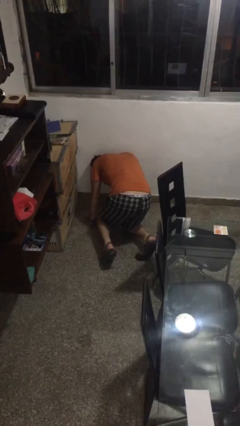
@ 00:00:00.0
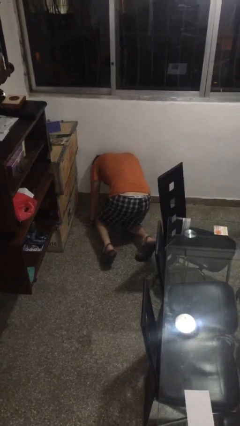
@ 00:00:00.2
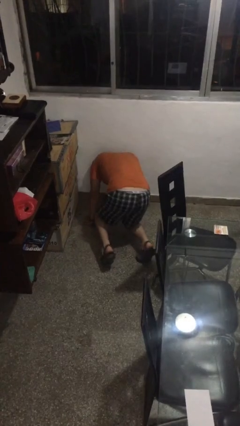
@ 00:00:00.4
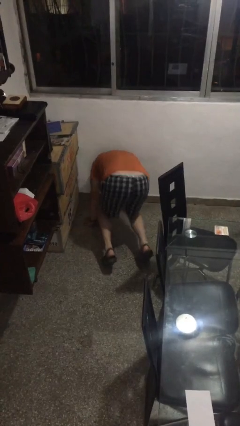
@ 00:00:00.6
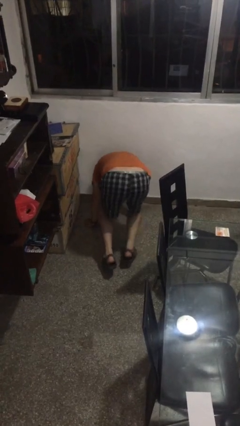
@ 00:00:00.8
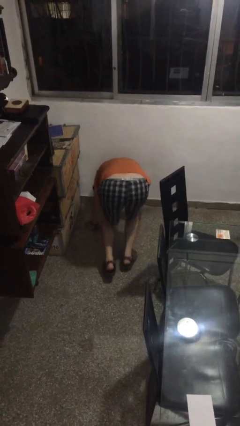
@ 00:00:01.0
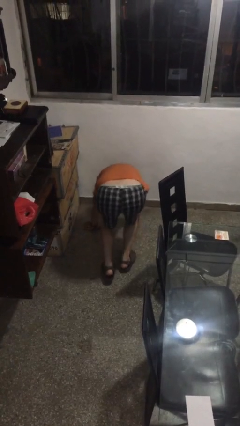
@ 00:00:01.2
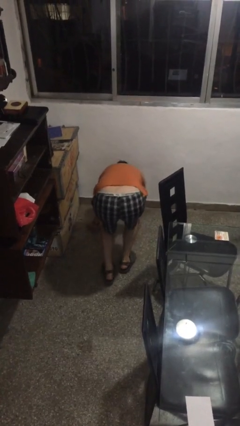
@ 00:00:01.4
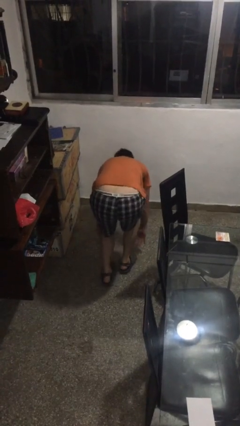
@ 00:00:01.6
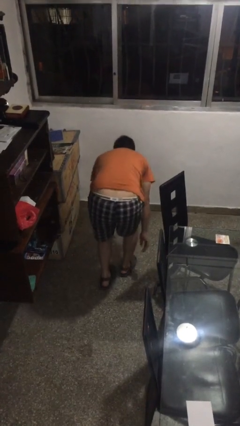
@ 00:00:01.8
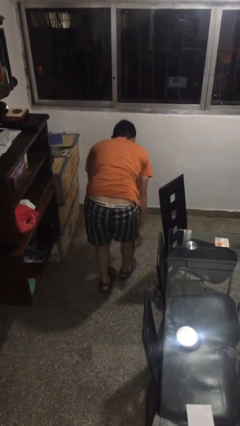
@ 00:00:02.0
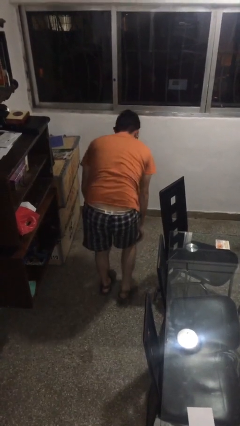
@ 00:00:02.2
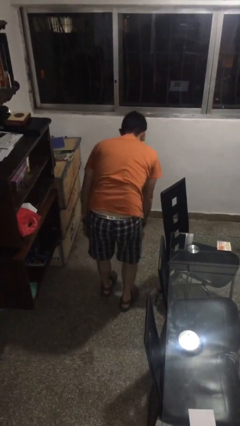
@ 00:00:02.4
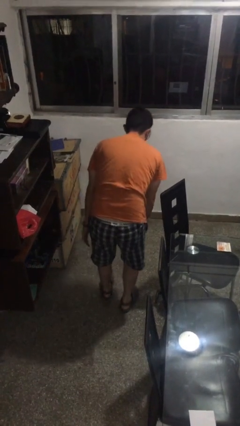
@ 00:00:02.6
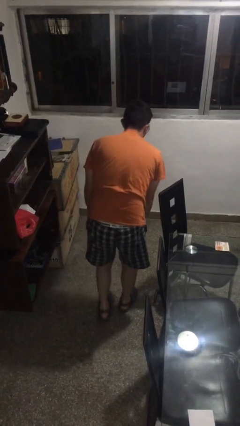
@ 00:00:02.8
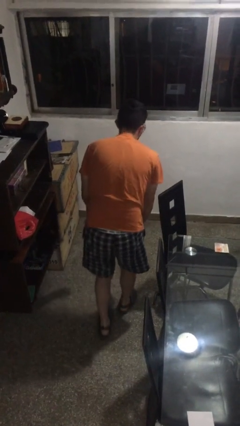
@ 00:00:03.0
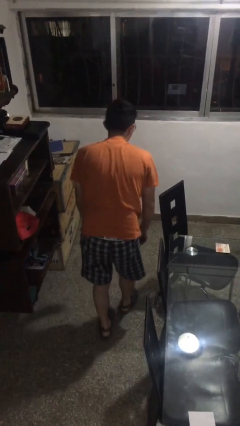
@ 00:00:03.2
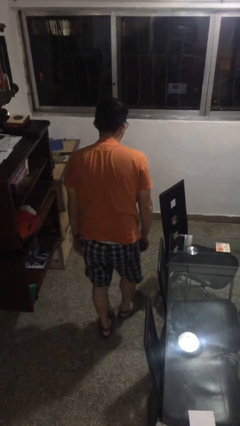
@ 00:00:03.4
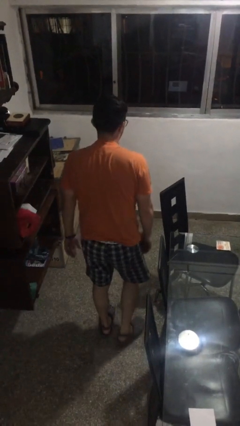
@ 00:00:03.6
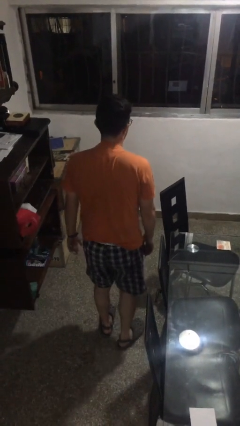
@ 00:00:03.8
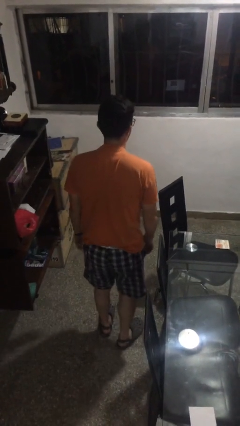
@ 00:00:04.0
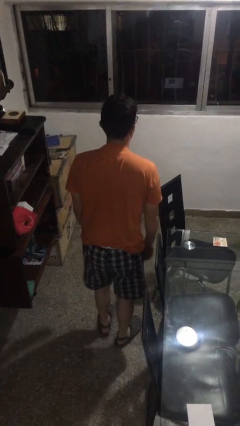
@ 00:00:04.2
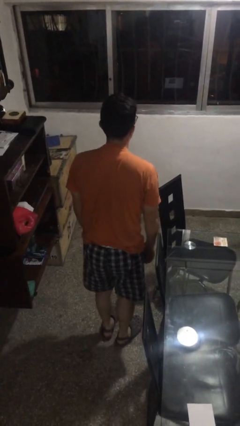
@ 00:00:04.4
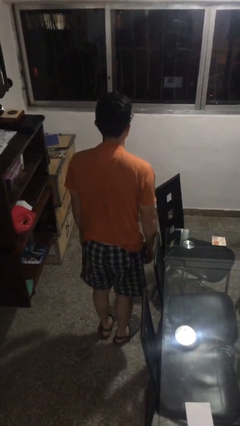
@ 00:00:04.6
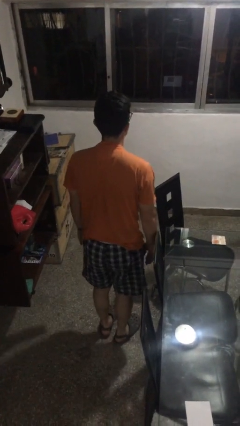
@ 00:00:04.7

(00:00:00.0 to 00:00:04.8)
person stands up from floor

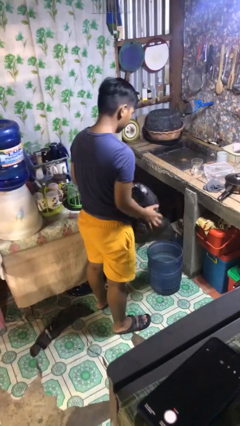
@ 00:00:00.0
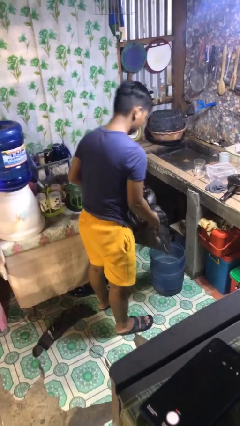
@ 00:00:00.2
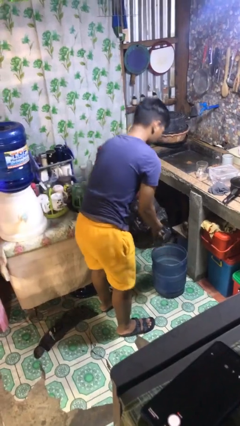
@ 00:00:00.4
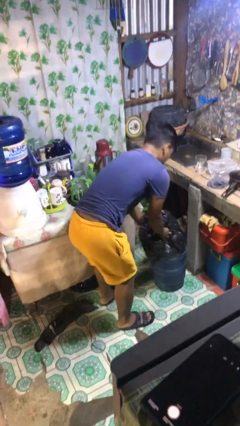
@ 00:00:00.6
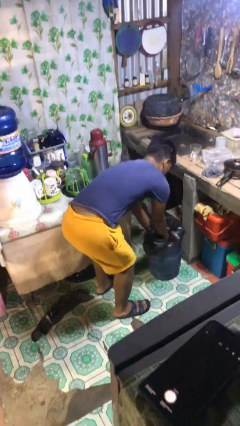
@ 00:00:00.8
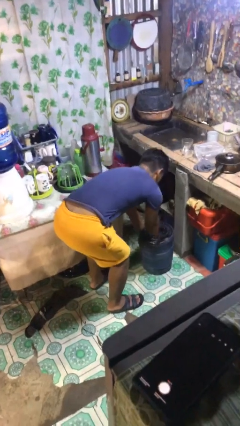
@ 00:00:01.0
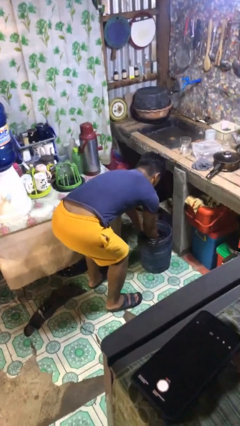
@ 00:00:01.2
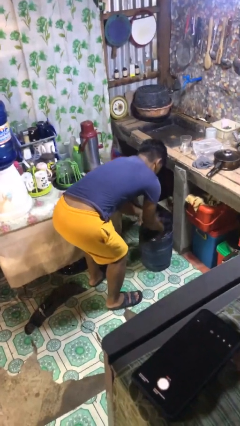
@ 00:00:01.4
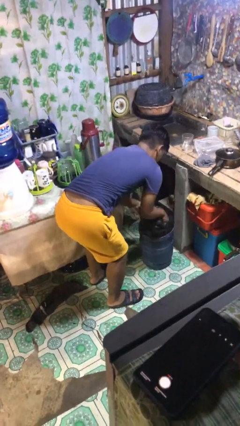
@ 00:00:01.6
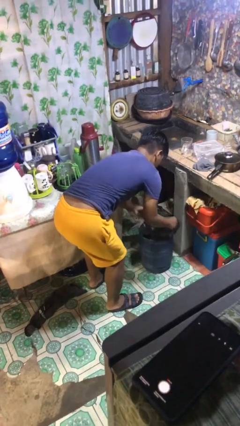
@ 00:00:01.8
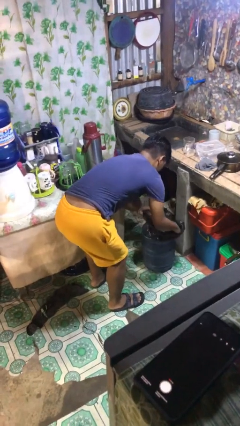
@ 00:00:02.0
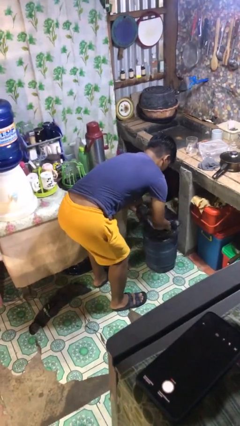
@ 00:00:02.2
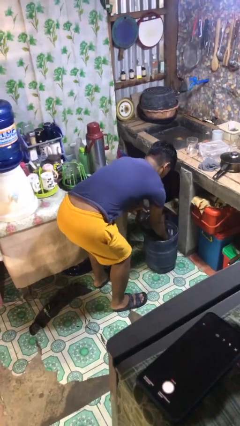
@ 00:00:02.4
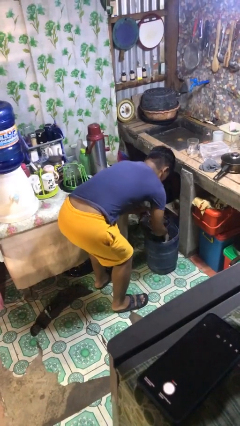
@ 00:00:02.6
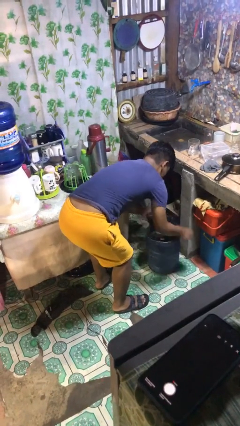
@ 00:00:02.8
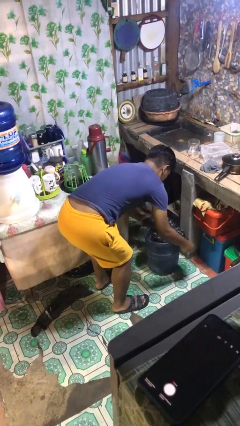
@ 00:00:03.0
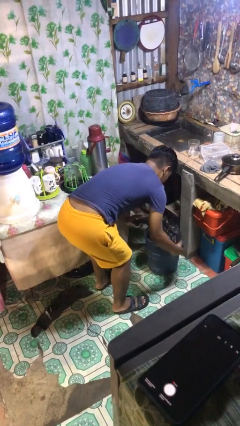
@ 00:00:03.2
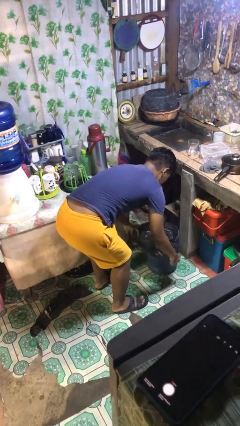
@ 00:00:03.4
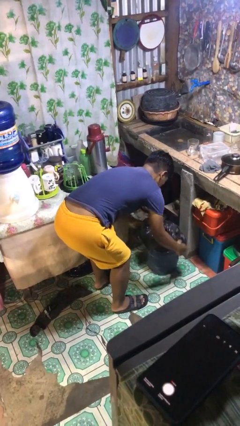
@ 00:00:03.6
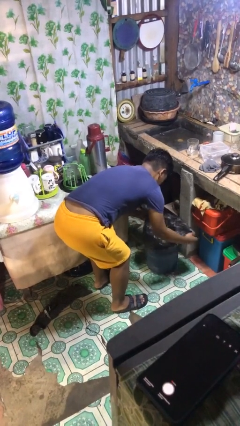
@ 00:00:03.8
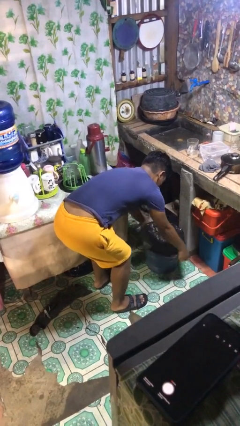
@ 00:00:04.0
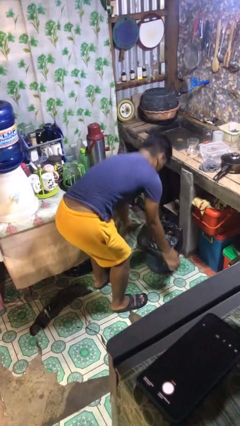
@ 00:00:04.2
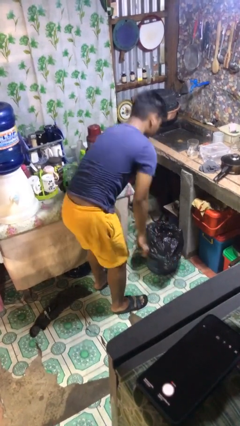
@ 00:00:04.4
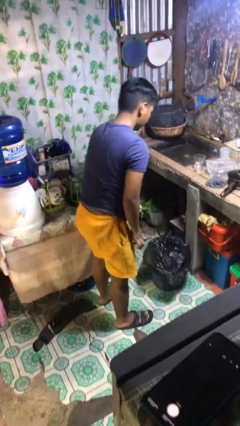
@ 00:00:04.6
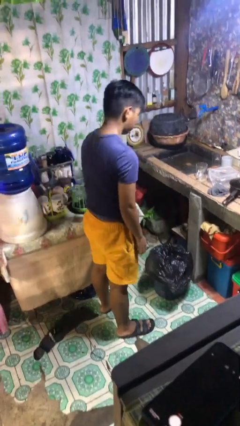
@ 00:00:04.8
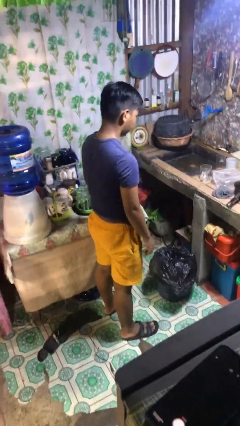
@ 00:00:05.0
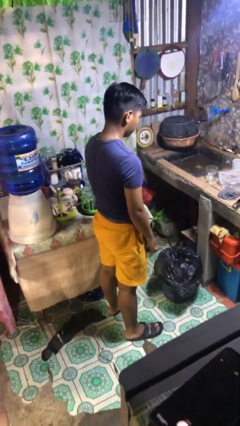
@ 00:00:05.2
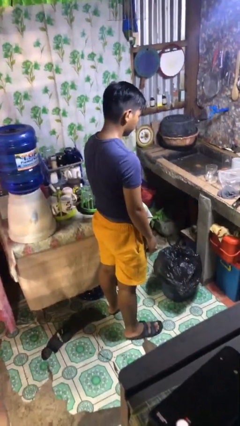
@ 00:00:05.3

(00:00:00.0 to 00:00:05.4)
person inserts trashbag into trashcan

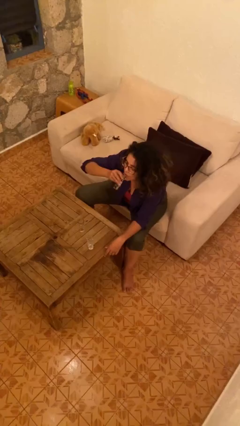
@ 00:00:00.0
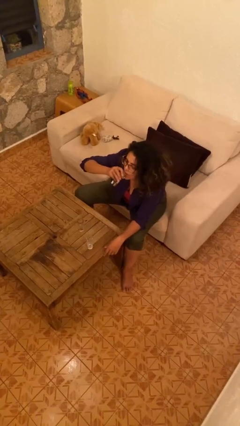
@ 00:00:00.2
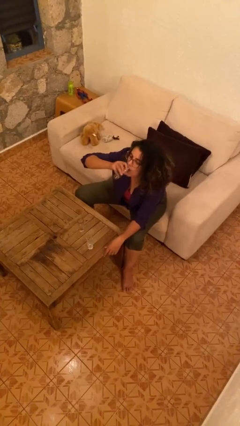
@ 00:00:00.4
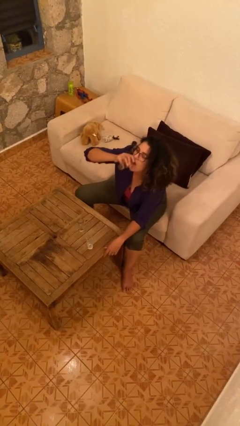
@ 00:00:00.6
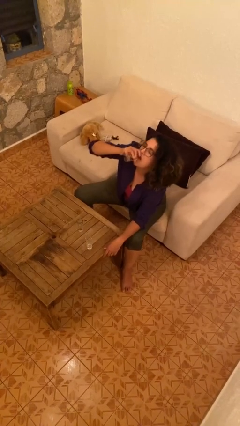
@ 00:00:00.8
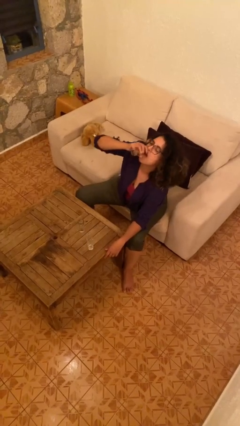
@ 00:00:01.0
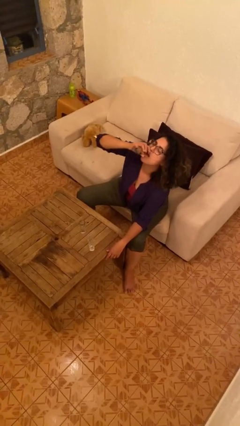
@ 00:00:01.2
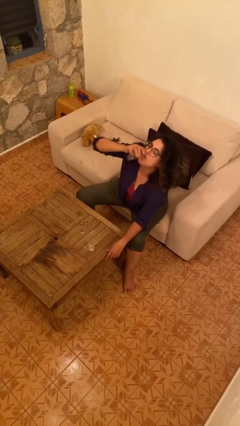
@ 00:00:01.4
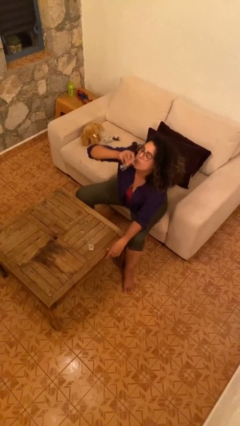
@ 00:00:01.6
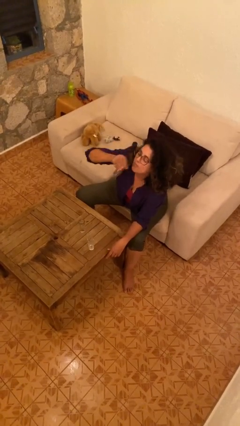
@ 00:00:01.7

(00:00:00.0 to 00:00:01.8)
person drinks from shotglass

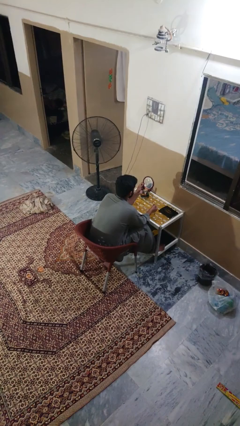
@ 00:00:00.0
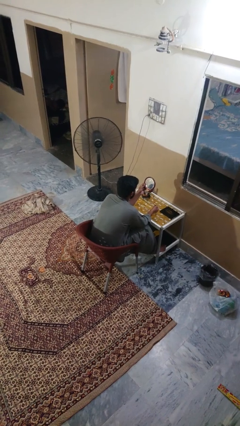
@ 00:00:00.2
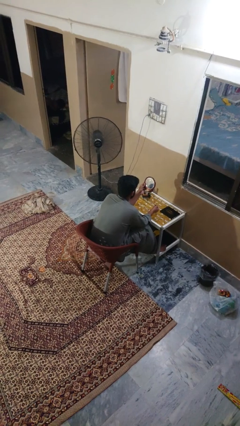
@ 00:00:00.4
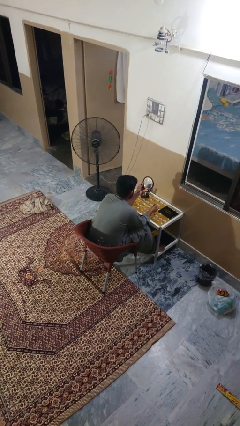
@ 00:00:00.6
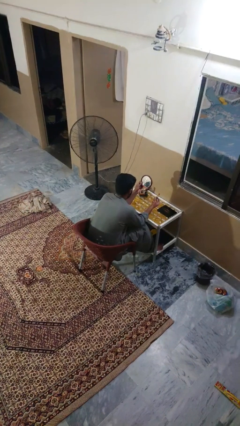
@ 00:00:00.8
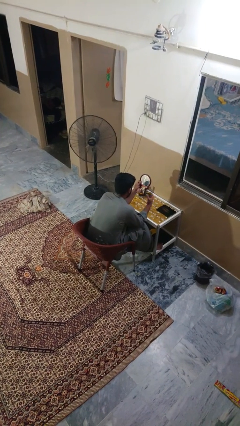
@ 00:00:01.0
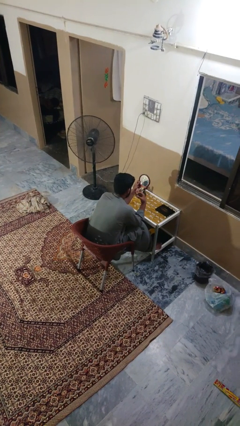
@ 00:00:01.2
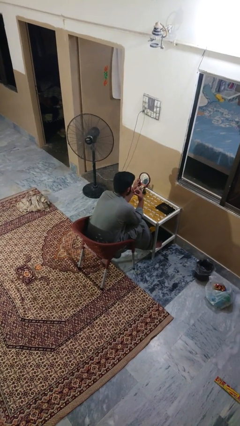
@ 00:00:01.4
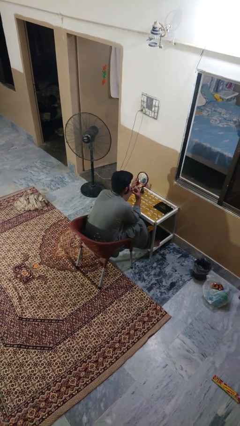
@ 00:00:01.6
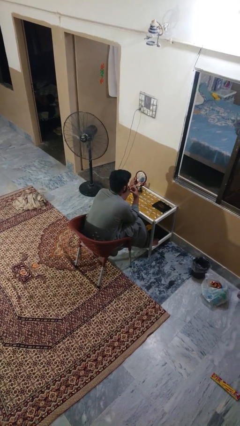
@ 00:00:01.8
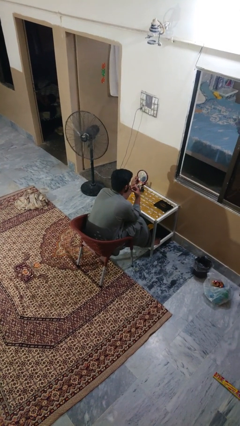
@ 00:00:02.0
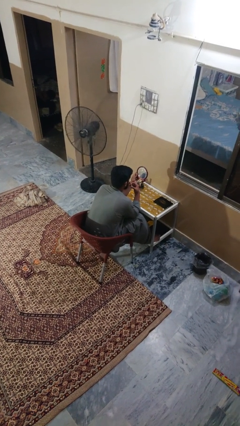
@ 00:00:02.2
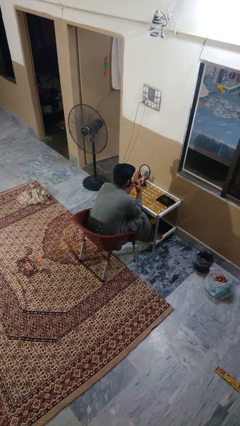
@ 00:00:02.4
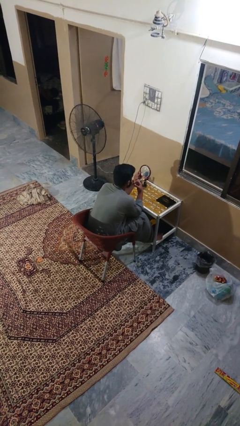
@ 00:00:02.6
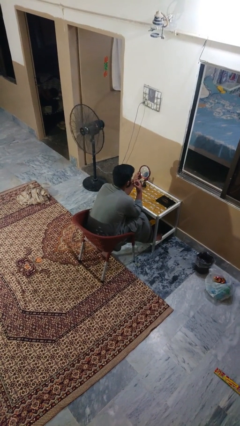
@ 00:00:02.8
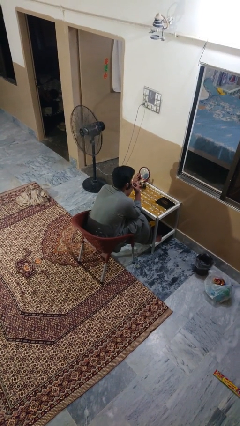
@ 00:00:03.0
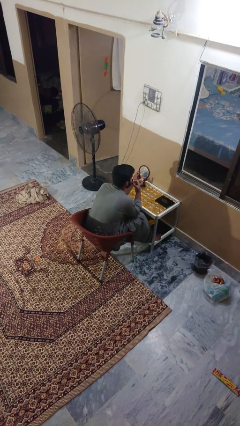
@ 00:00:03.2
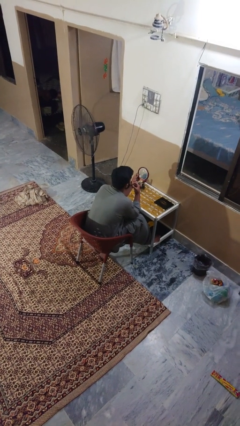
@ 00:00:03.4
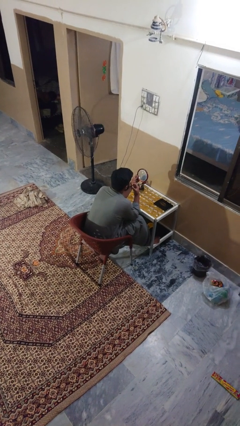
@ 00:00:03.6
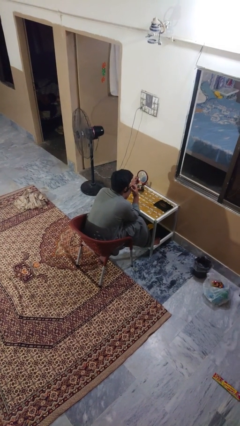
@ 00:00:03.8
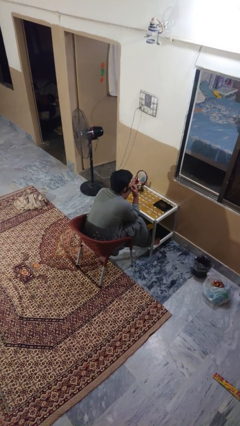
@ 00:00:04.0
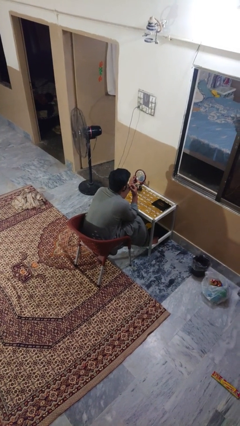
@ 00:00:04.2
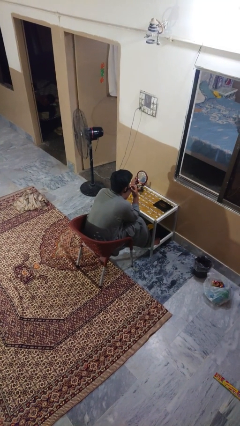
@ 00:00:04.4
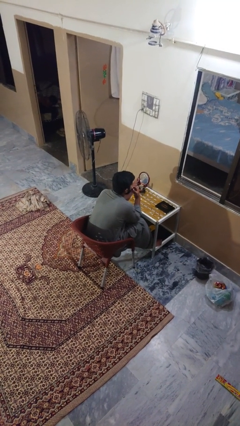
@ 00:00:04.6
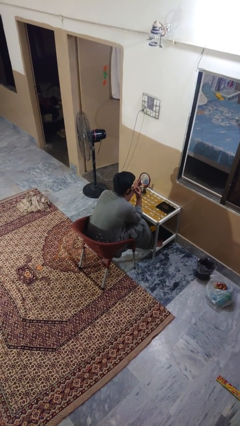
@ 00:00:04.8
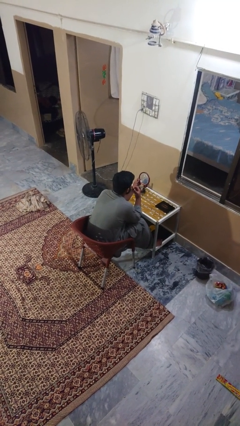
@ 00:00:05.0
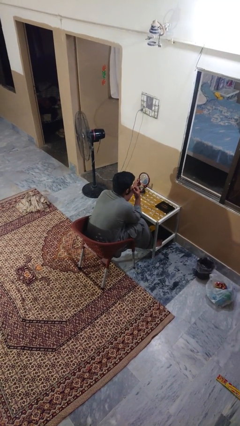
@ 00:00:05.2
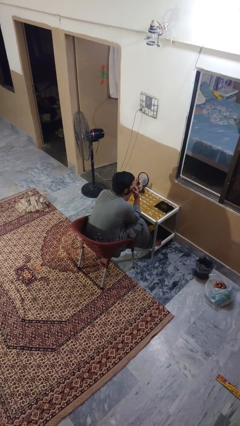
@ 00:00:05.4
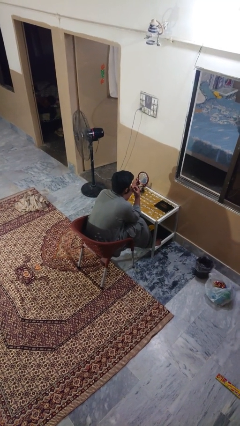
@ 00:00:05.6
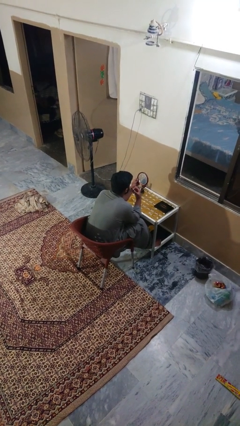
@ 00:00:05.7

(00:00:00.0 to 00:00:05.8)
person applies lip makeup
